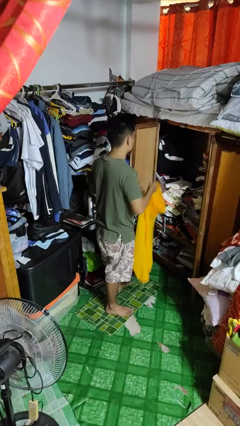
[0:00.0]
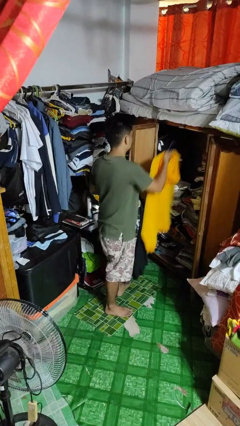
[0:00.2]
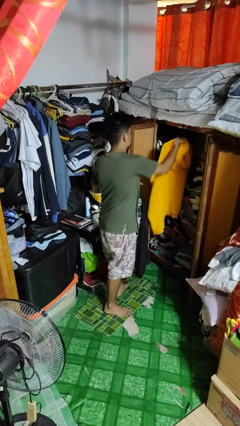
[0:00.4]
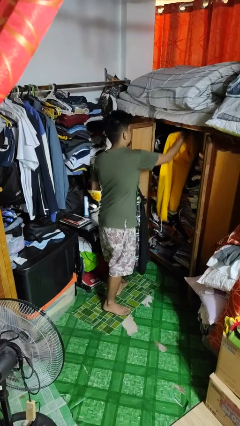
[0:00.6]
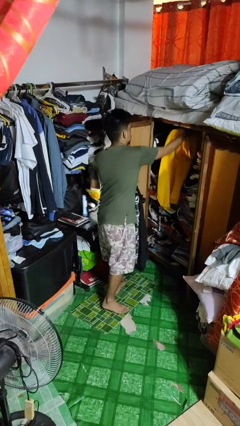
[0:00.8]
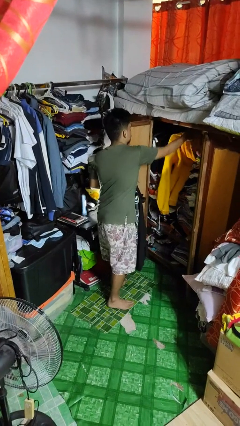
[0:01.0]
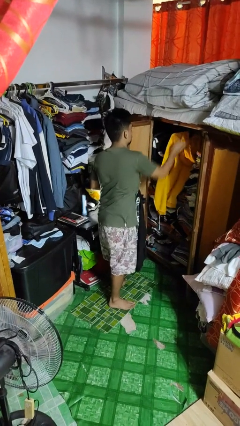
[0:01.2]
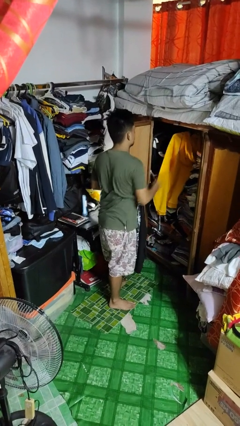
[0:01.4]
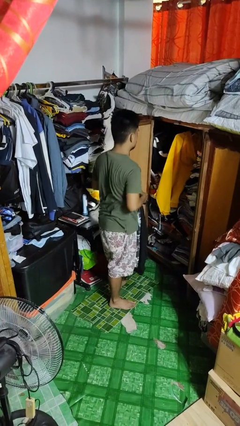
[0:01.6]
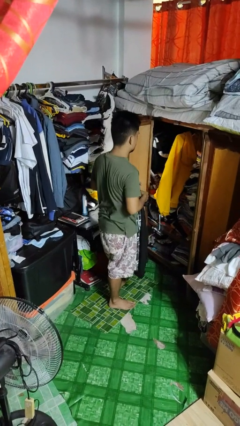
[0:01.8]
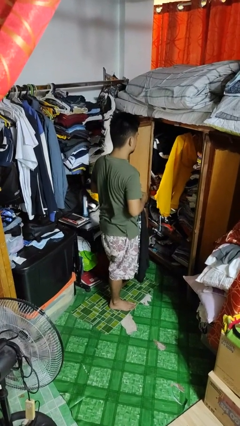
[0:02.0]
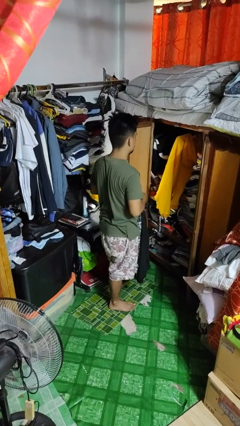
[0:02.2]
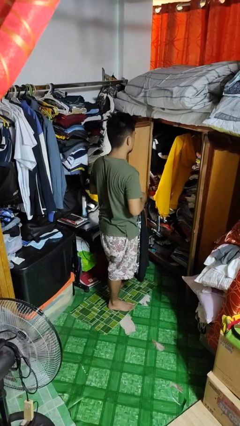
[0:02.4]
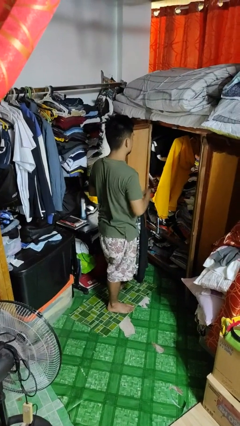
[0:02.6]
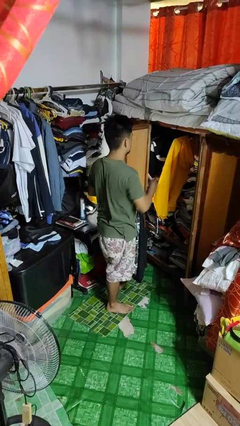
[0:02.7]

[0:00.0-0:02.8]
person puts clothes into closet

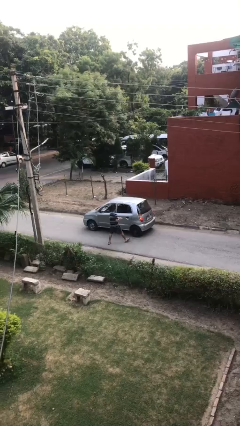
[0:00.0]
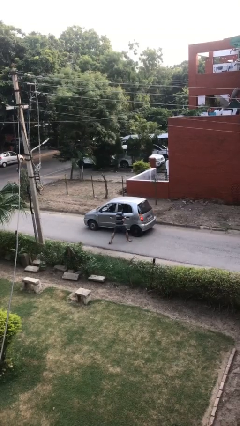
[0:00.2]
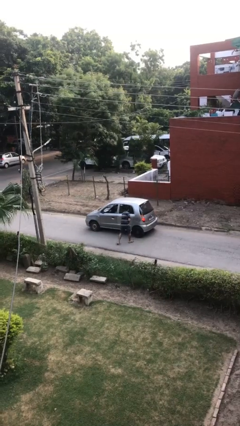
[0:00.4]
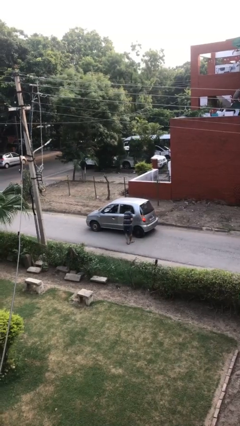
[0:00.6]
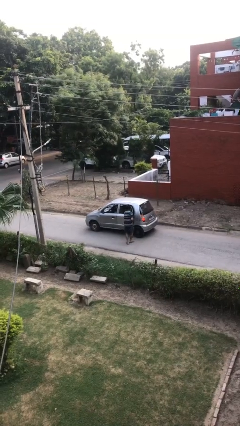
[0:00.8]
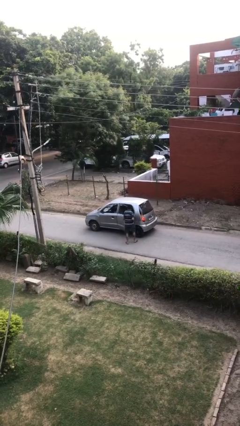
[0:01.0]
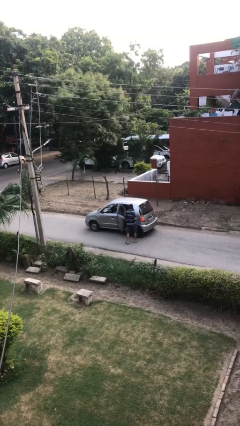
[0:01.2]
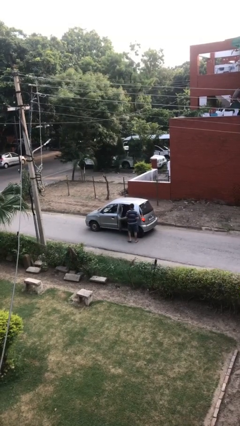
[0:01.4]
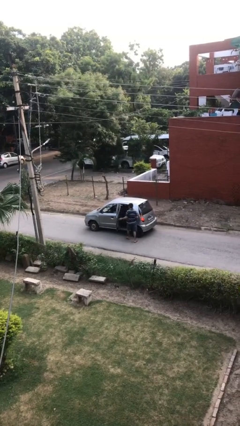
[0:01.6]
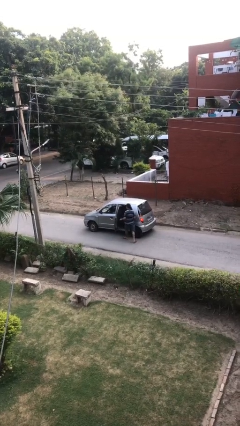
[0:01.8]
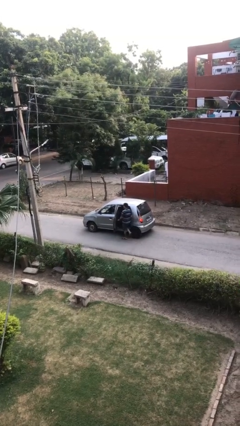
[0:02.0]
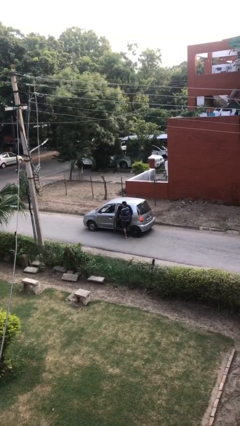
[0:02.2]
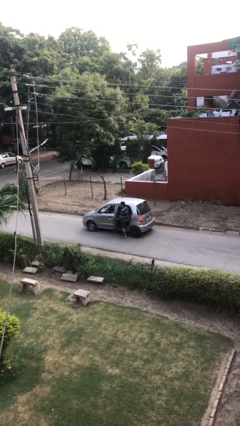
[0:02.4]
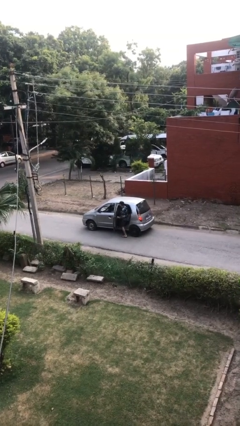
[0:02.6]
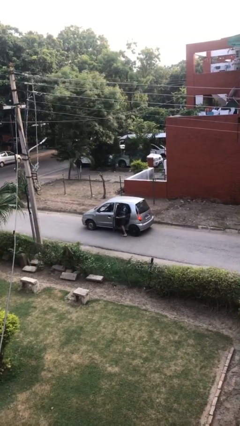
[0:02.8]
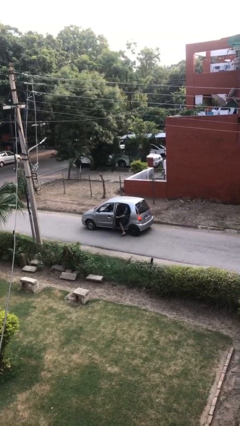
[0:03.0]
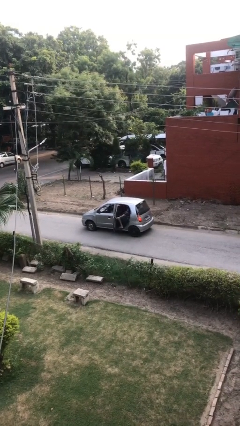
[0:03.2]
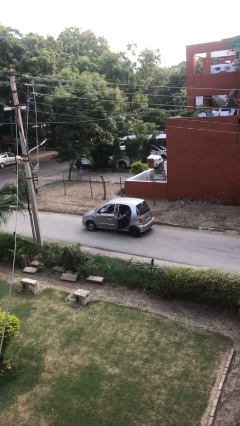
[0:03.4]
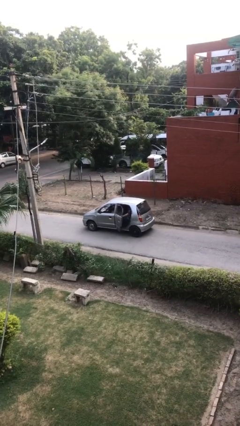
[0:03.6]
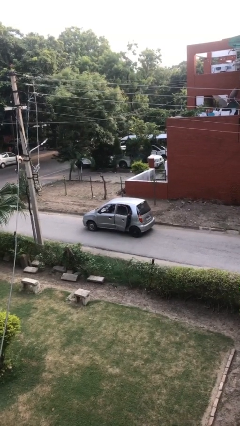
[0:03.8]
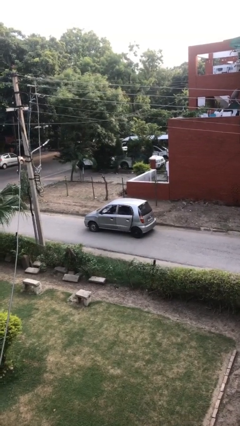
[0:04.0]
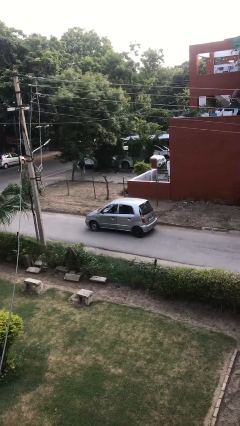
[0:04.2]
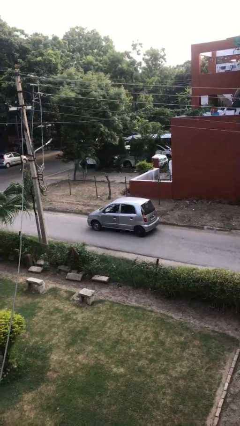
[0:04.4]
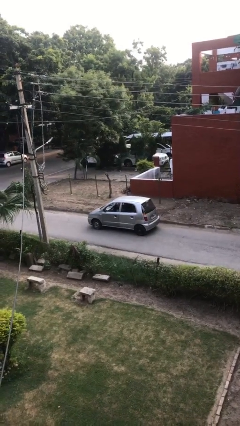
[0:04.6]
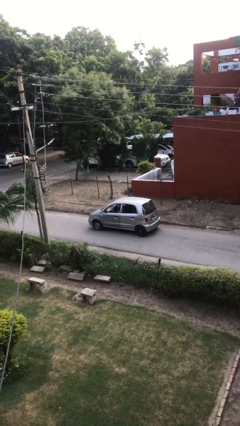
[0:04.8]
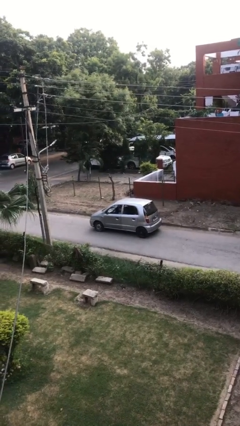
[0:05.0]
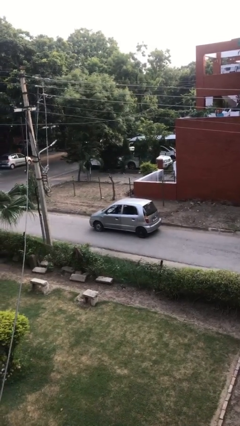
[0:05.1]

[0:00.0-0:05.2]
car picks up person

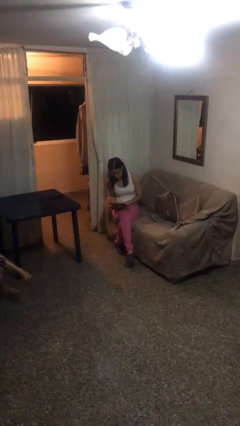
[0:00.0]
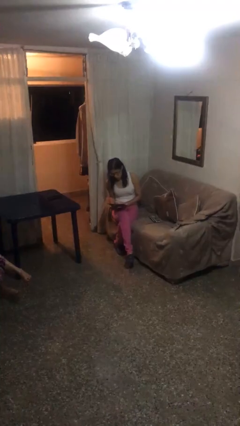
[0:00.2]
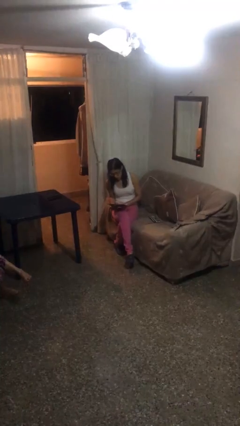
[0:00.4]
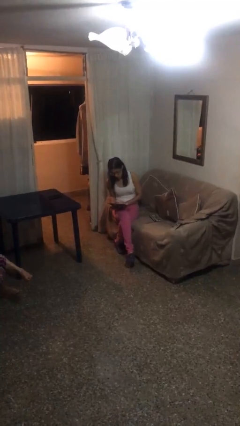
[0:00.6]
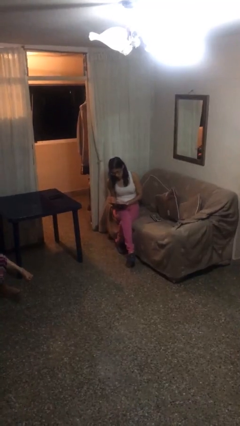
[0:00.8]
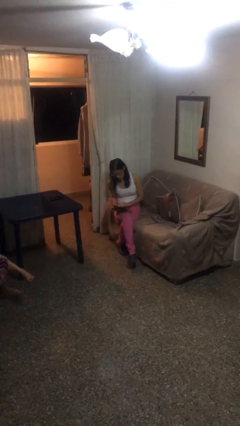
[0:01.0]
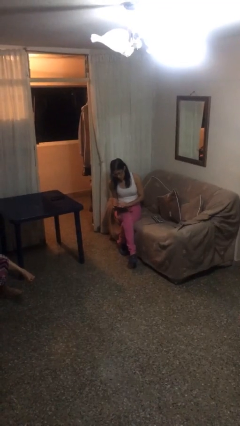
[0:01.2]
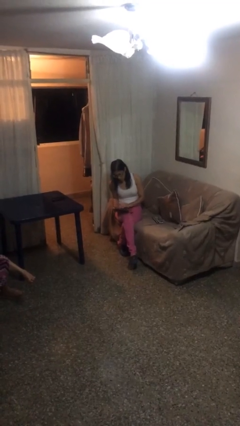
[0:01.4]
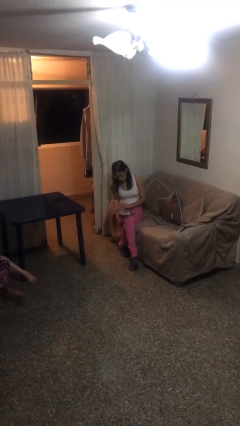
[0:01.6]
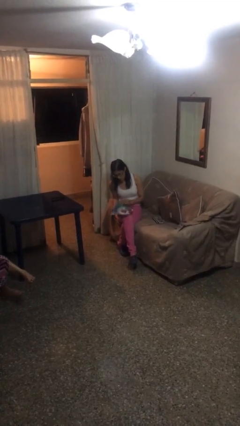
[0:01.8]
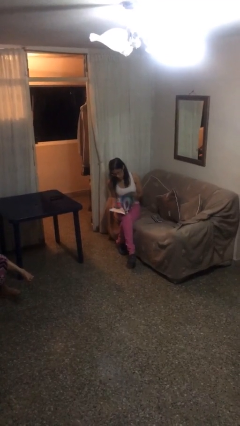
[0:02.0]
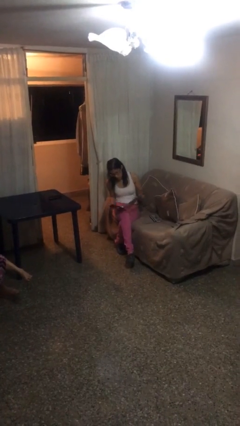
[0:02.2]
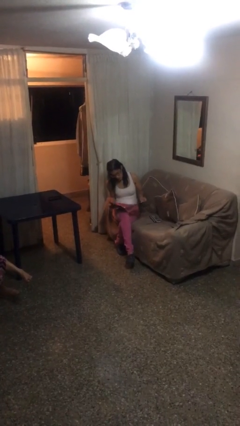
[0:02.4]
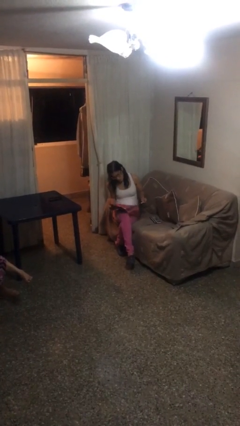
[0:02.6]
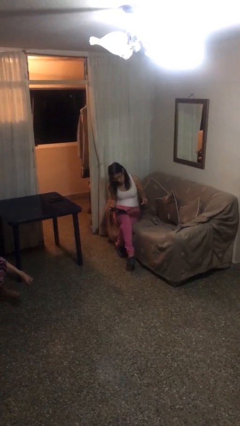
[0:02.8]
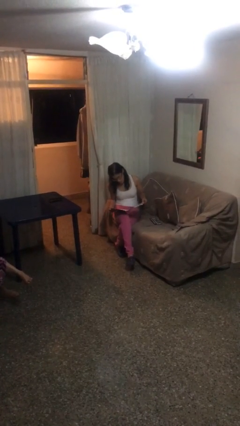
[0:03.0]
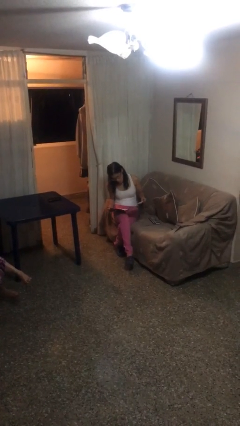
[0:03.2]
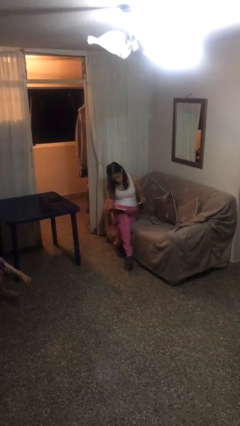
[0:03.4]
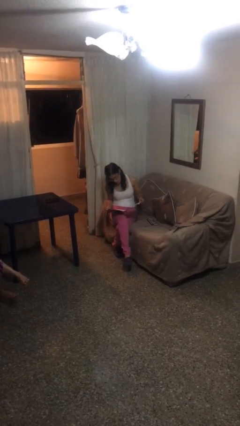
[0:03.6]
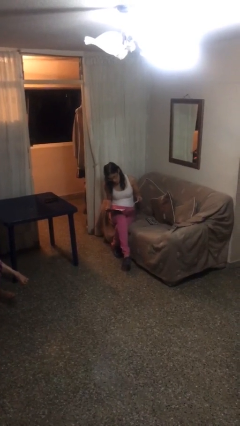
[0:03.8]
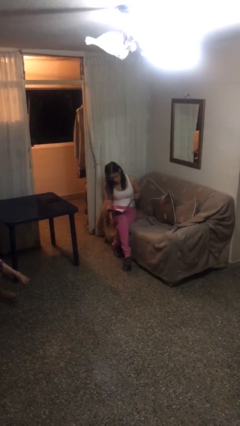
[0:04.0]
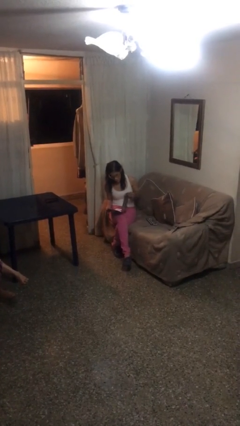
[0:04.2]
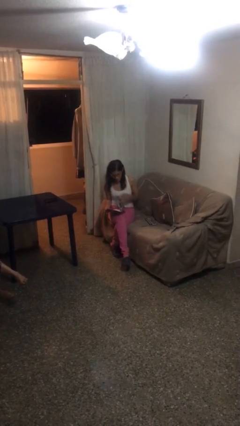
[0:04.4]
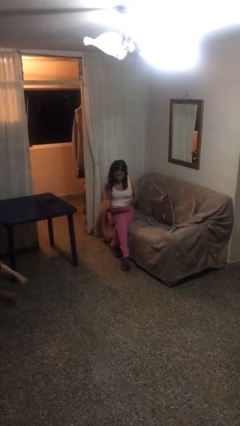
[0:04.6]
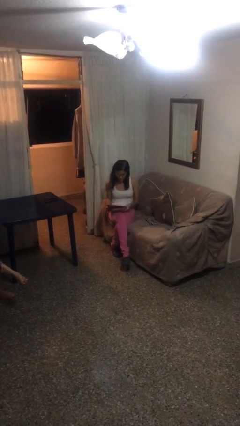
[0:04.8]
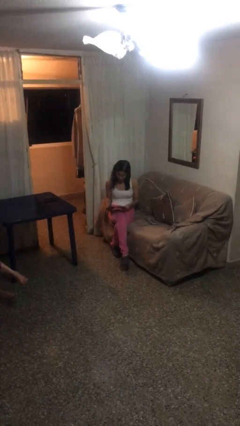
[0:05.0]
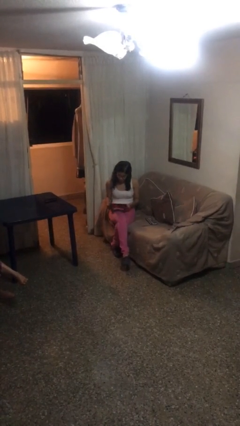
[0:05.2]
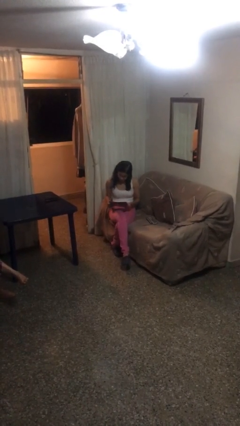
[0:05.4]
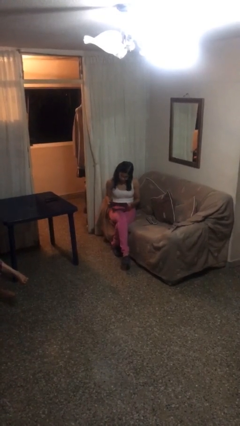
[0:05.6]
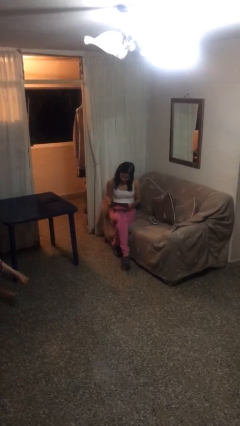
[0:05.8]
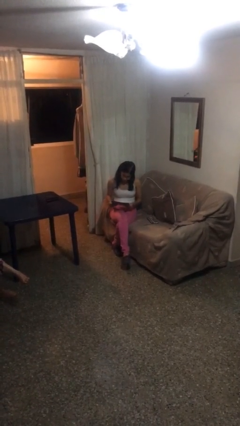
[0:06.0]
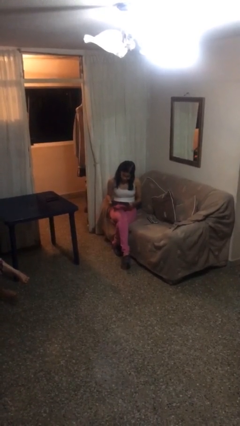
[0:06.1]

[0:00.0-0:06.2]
person reads document

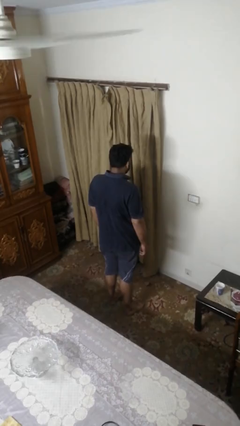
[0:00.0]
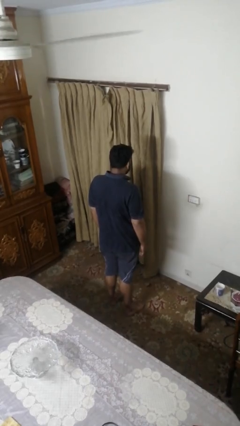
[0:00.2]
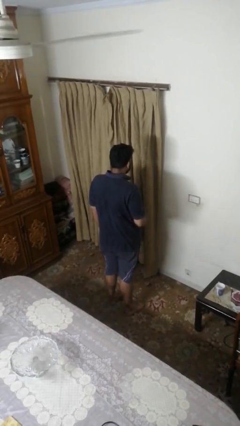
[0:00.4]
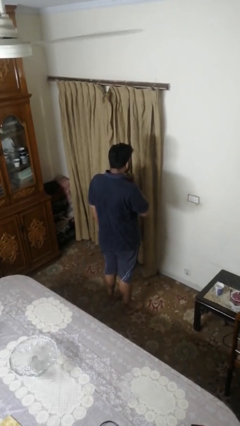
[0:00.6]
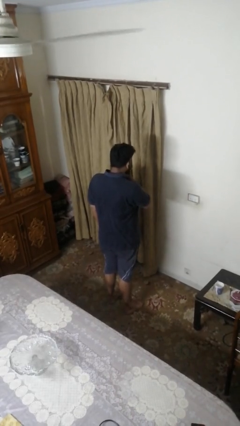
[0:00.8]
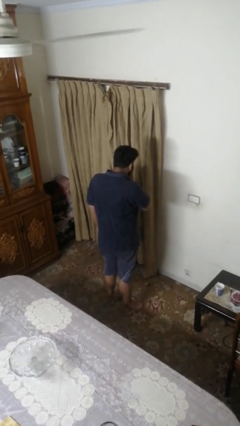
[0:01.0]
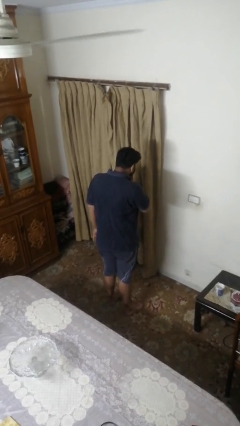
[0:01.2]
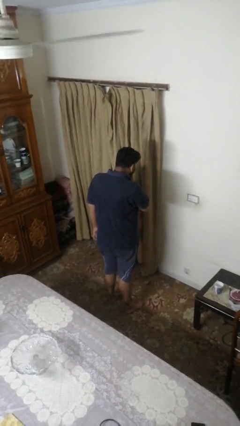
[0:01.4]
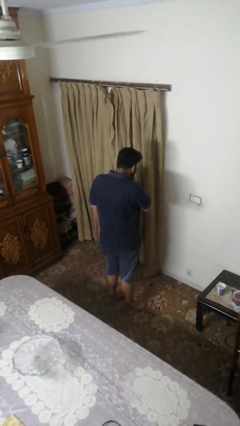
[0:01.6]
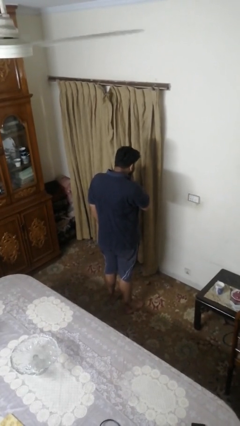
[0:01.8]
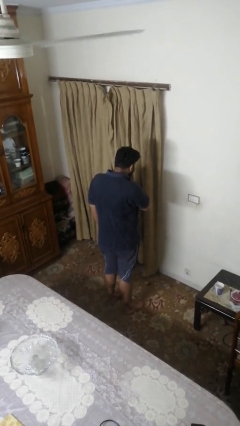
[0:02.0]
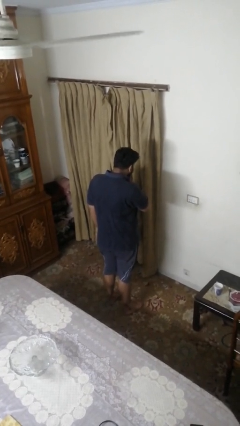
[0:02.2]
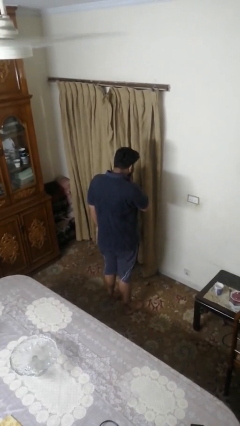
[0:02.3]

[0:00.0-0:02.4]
person strokes chin

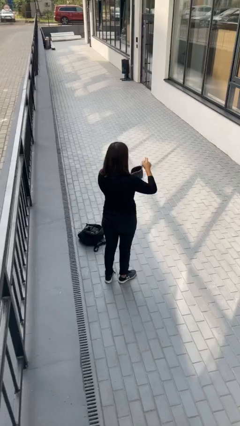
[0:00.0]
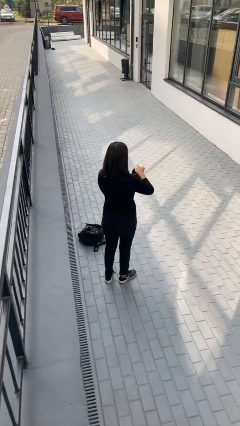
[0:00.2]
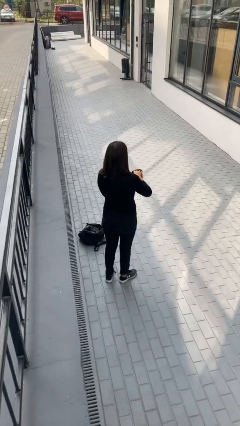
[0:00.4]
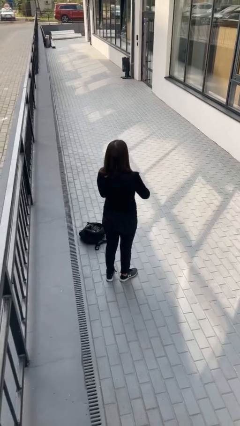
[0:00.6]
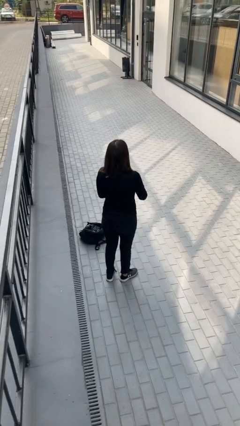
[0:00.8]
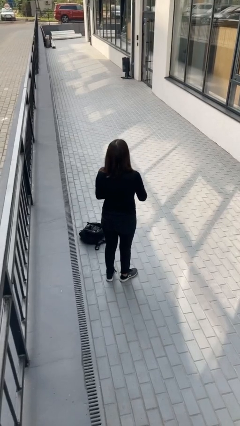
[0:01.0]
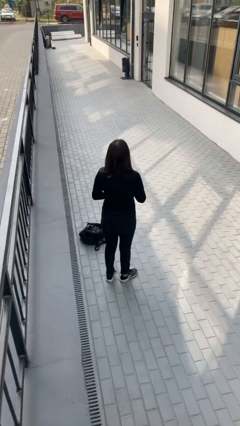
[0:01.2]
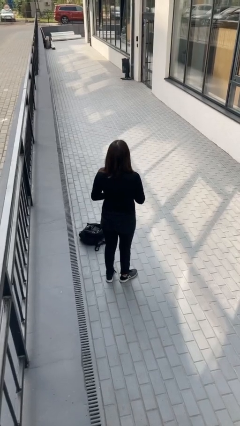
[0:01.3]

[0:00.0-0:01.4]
person puts object into purse
